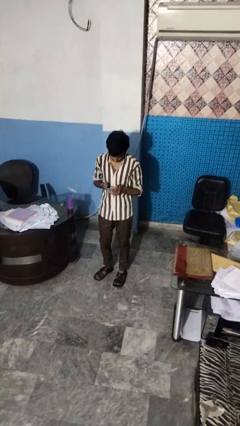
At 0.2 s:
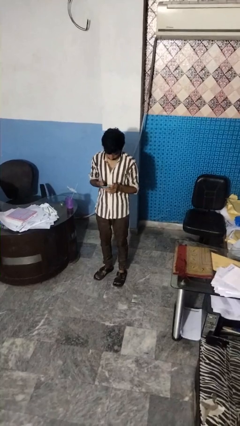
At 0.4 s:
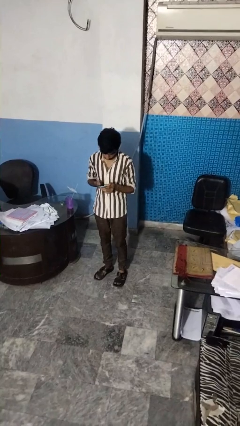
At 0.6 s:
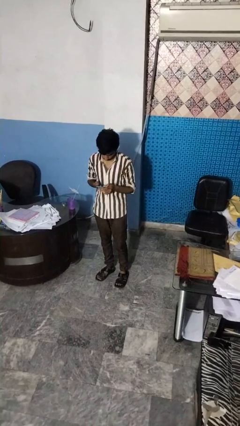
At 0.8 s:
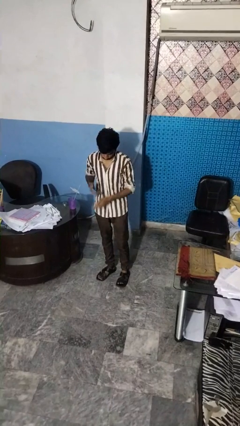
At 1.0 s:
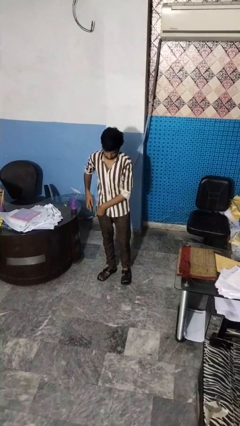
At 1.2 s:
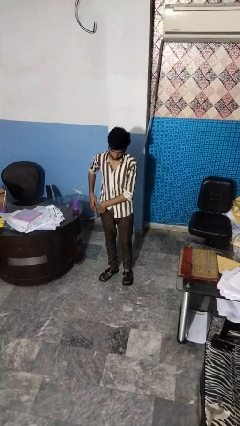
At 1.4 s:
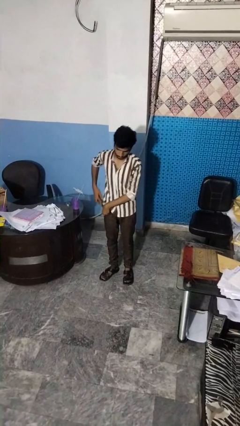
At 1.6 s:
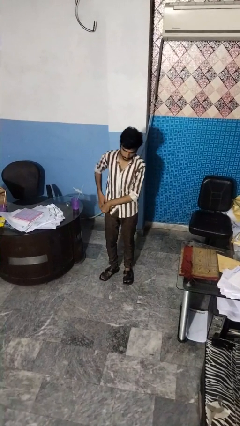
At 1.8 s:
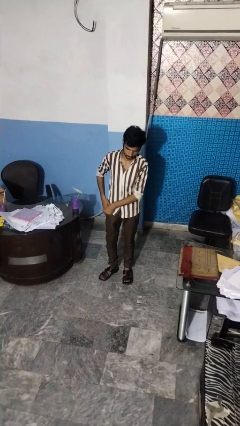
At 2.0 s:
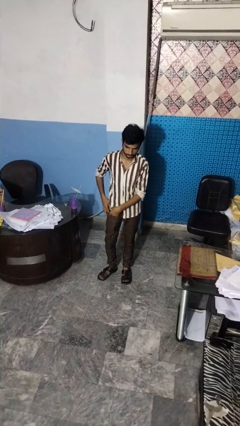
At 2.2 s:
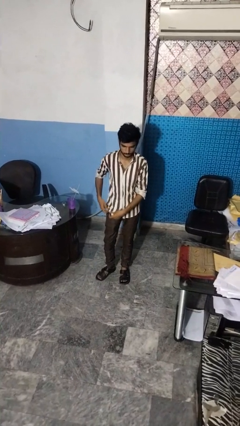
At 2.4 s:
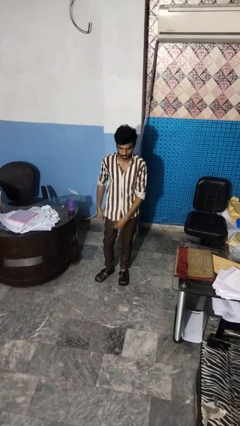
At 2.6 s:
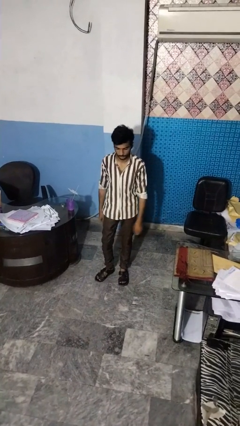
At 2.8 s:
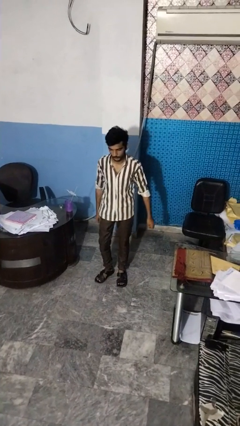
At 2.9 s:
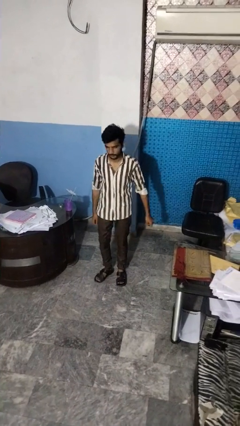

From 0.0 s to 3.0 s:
person puts phone into pocket

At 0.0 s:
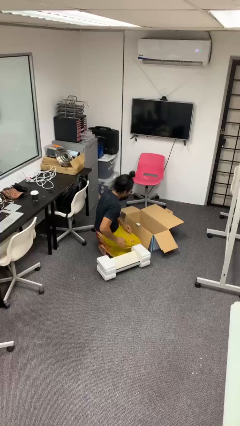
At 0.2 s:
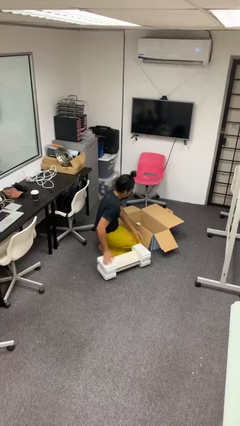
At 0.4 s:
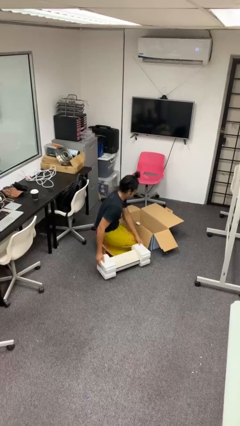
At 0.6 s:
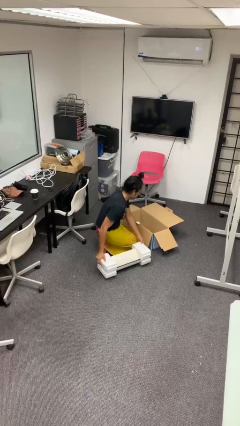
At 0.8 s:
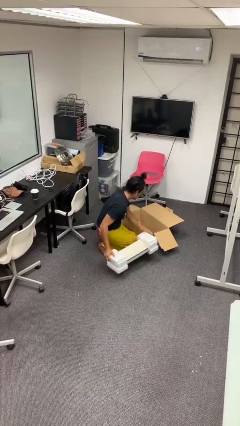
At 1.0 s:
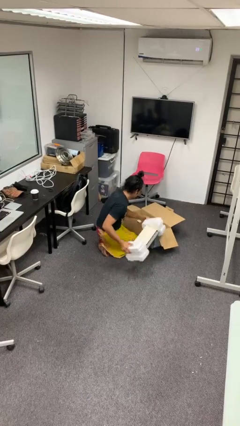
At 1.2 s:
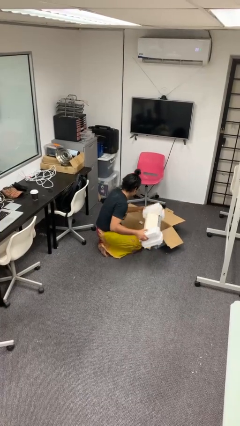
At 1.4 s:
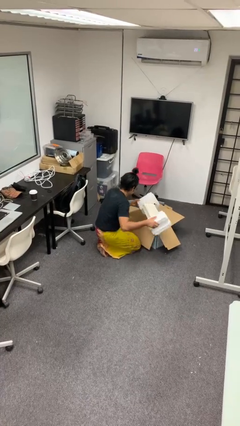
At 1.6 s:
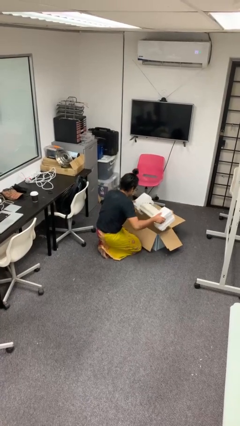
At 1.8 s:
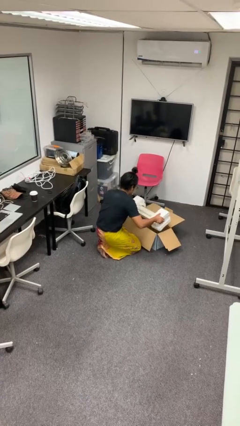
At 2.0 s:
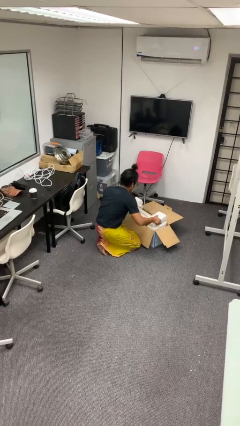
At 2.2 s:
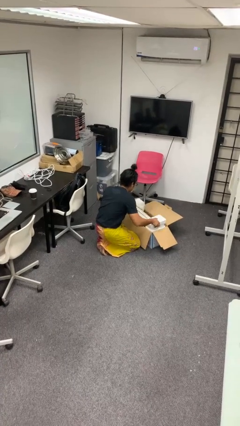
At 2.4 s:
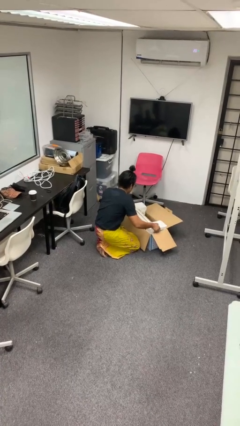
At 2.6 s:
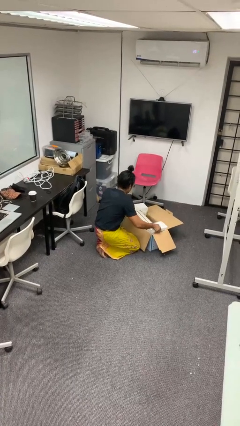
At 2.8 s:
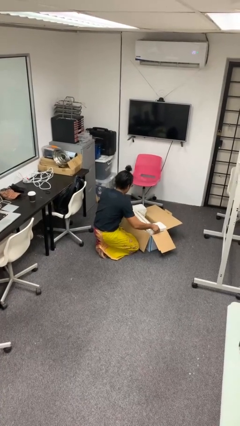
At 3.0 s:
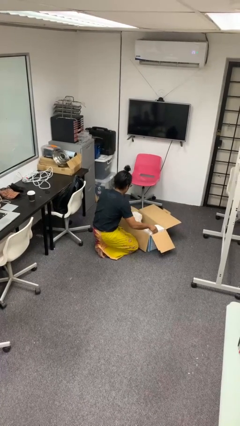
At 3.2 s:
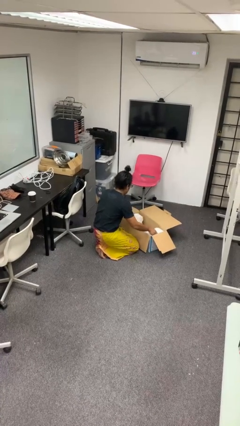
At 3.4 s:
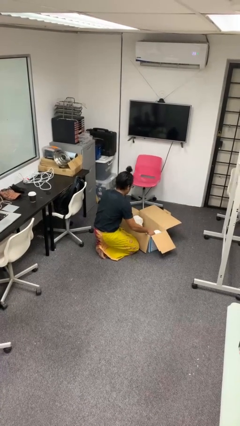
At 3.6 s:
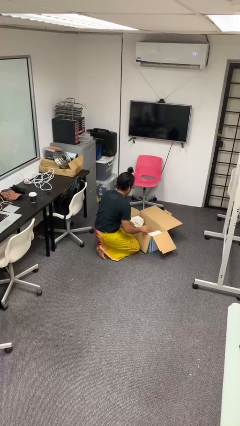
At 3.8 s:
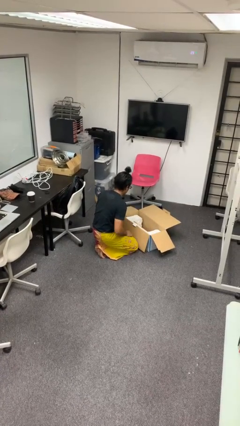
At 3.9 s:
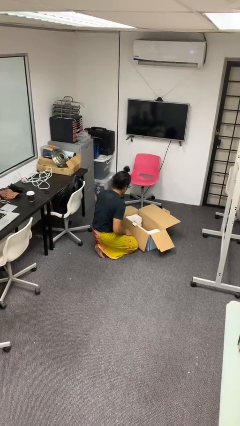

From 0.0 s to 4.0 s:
person puts object into box

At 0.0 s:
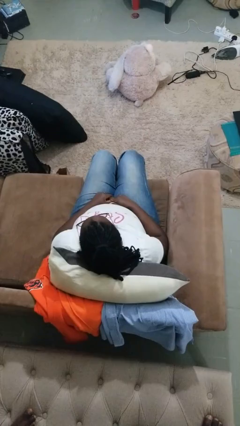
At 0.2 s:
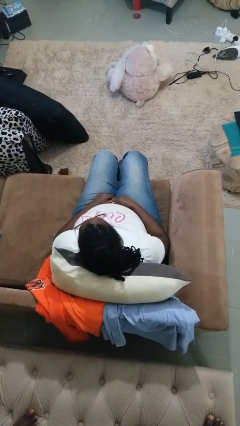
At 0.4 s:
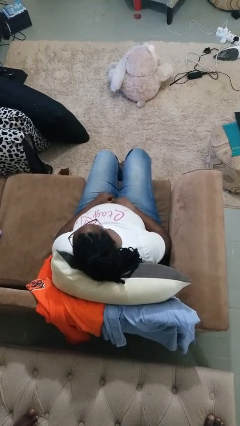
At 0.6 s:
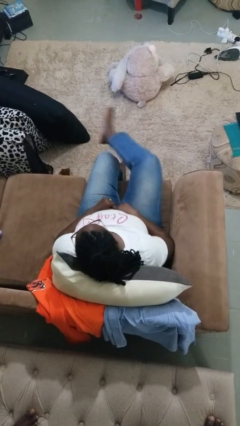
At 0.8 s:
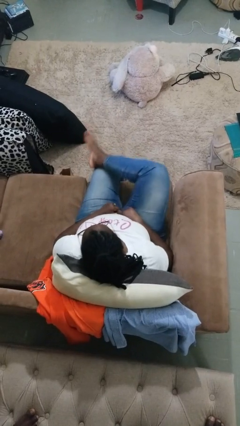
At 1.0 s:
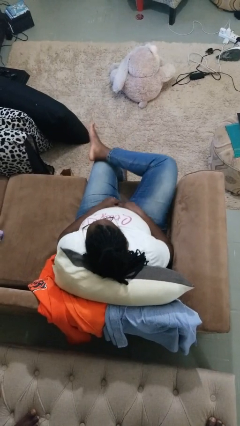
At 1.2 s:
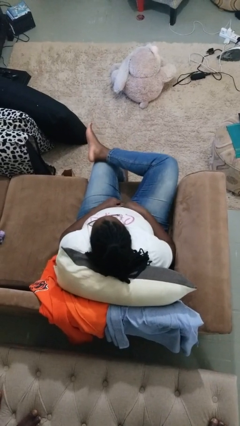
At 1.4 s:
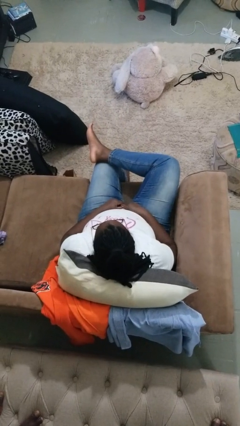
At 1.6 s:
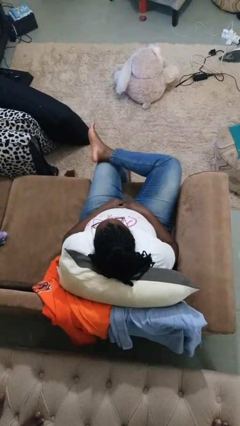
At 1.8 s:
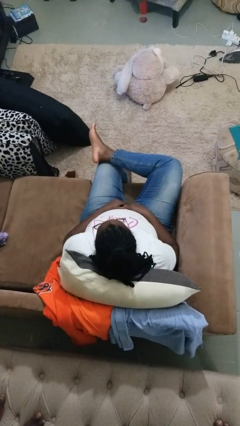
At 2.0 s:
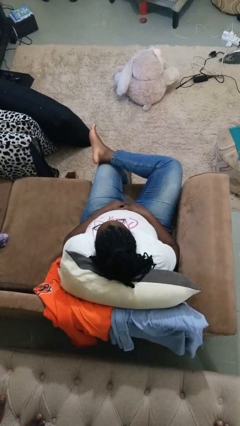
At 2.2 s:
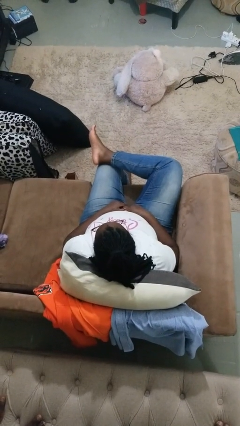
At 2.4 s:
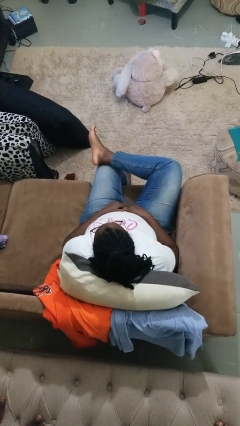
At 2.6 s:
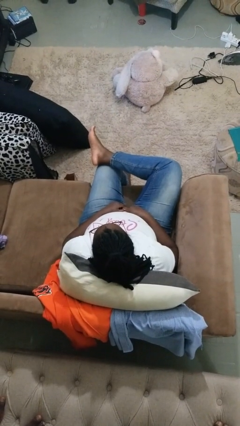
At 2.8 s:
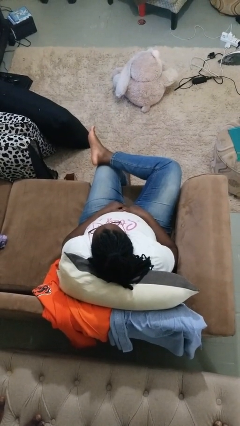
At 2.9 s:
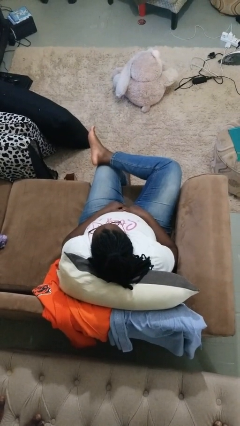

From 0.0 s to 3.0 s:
person crosses legs

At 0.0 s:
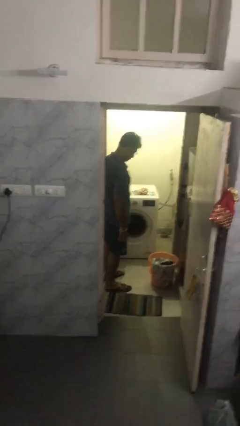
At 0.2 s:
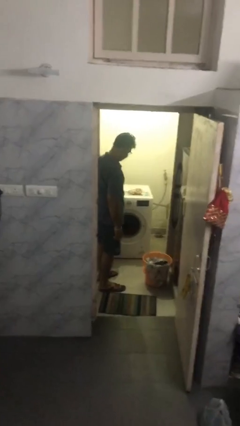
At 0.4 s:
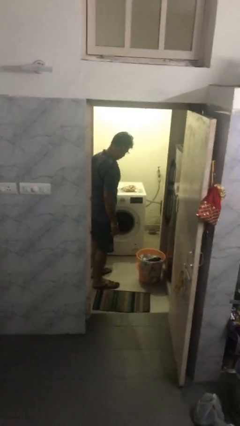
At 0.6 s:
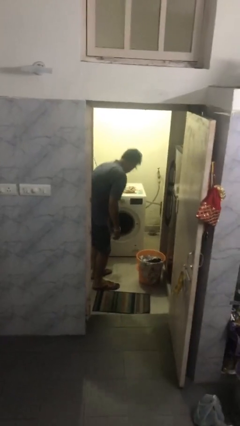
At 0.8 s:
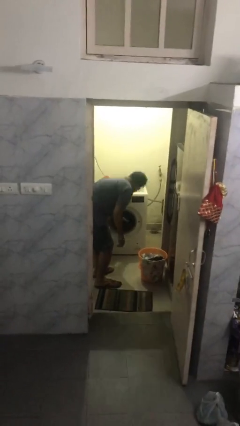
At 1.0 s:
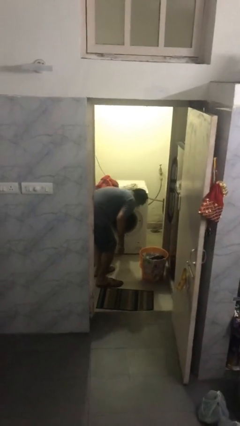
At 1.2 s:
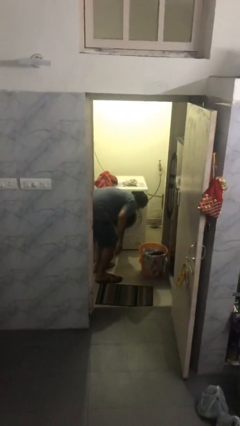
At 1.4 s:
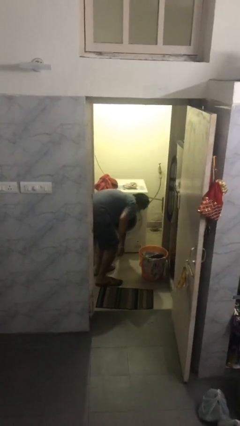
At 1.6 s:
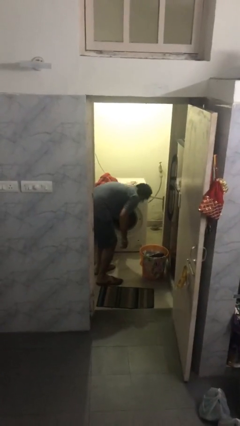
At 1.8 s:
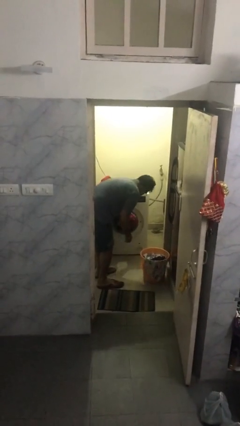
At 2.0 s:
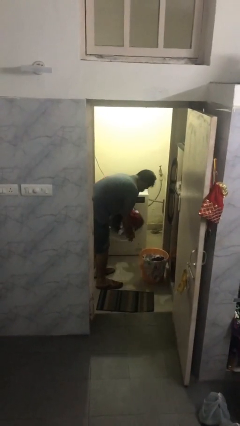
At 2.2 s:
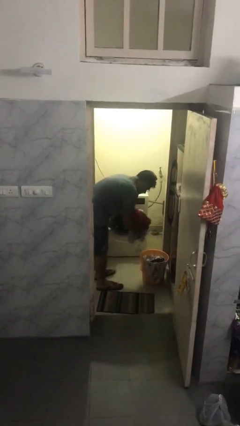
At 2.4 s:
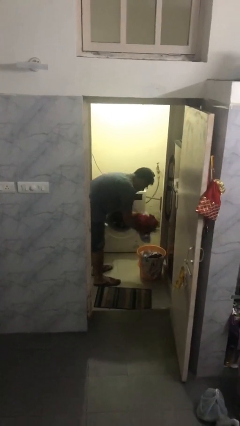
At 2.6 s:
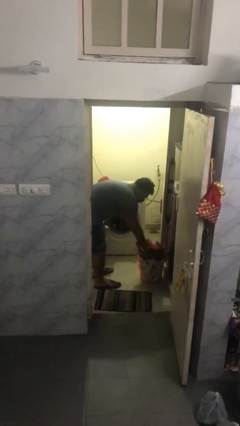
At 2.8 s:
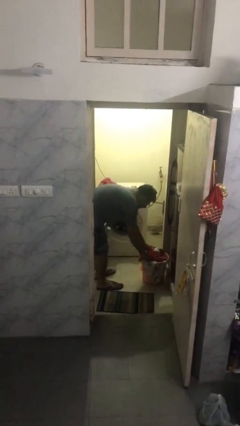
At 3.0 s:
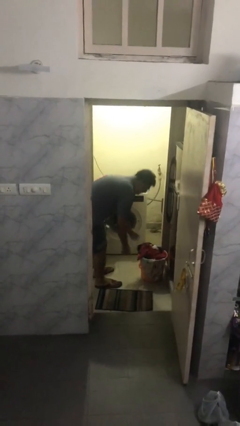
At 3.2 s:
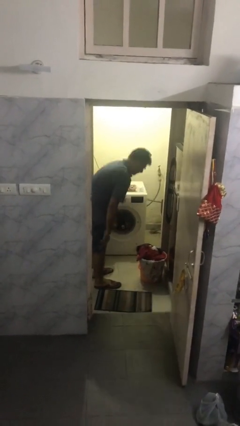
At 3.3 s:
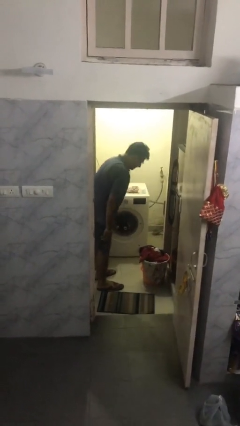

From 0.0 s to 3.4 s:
person unloads clotheswasher

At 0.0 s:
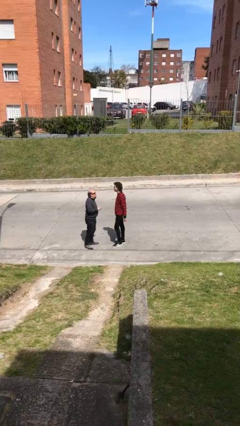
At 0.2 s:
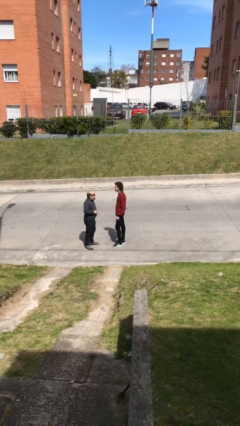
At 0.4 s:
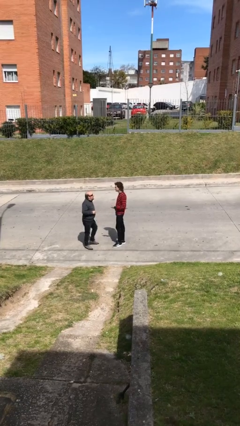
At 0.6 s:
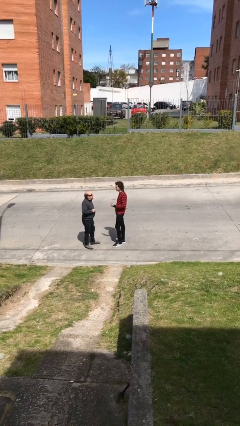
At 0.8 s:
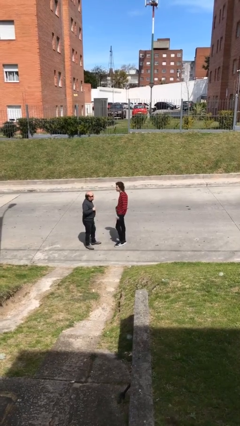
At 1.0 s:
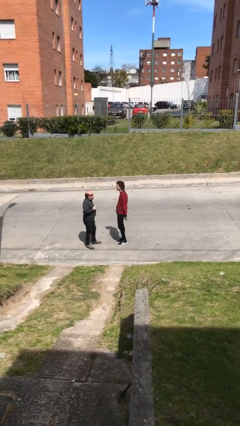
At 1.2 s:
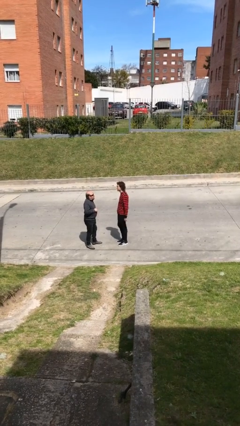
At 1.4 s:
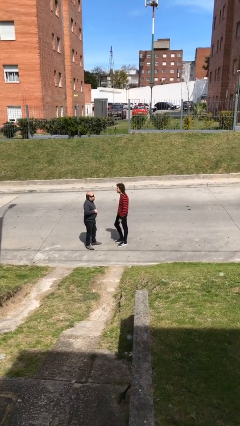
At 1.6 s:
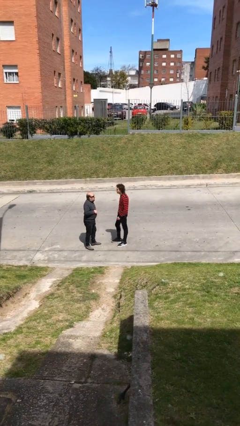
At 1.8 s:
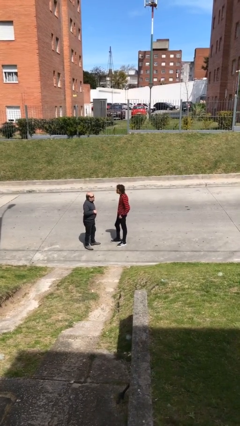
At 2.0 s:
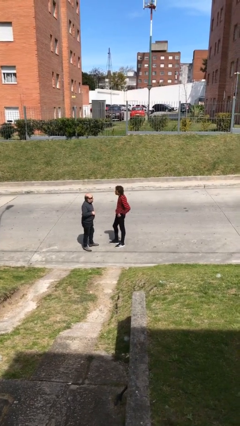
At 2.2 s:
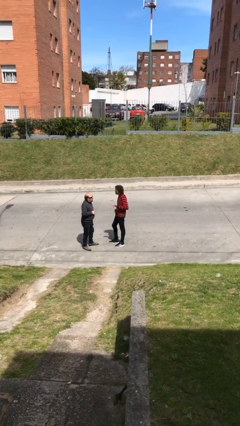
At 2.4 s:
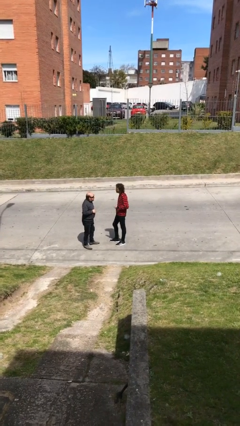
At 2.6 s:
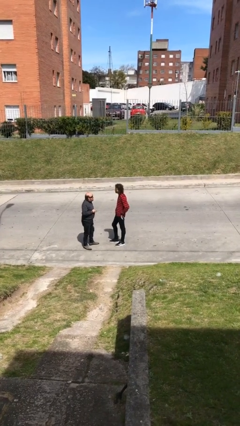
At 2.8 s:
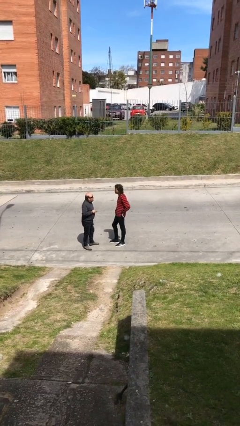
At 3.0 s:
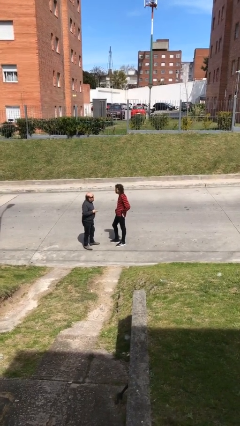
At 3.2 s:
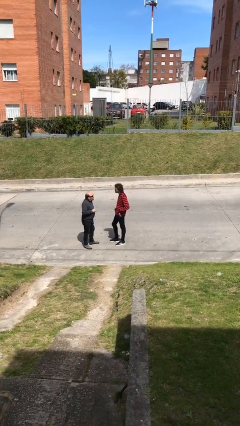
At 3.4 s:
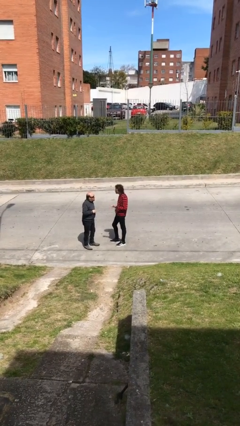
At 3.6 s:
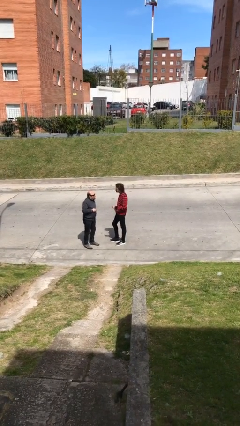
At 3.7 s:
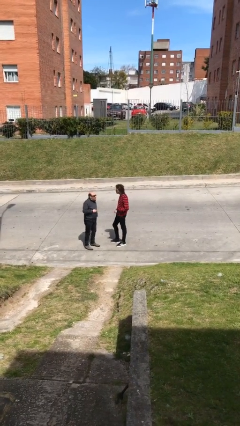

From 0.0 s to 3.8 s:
person talks to person
